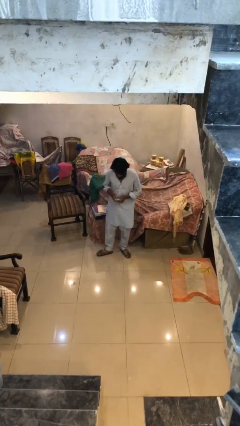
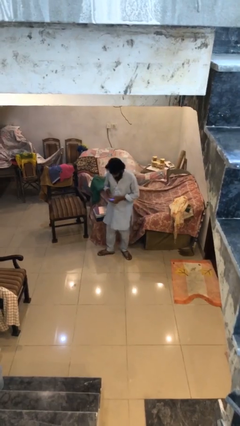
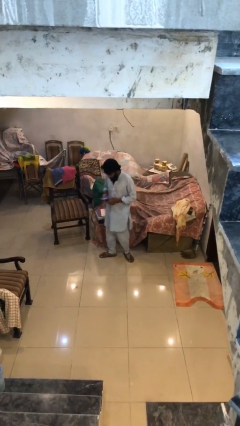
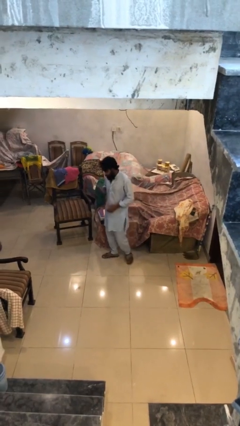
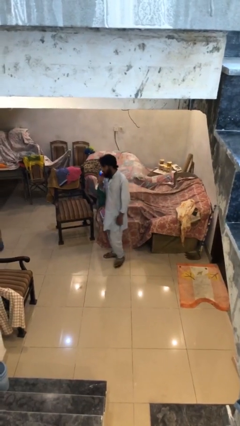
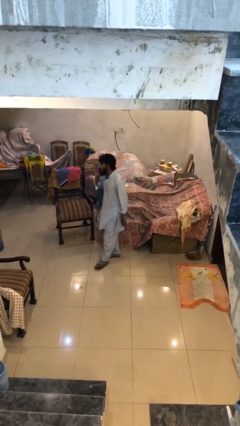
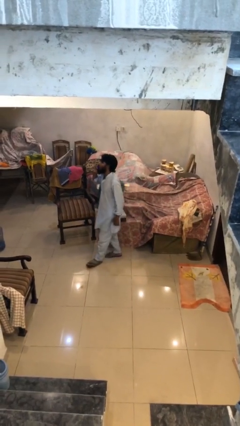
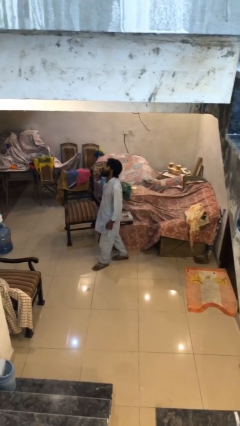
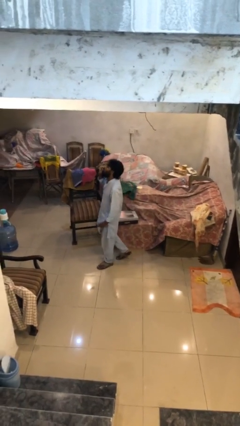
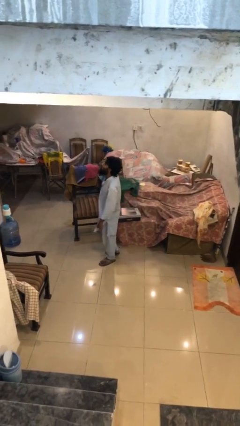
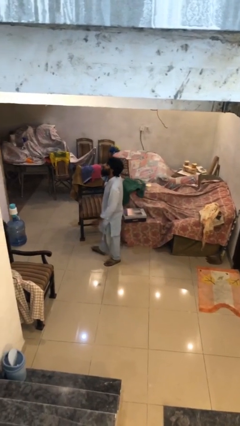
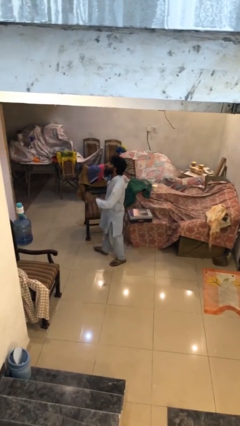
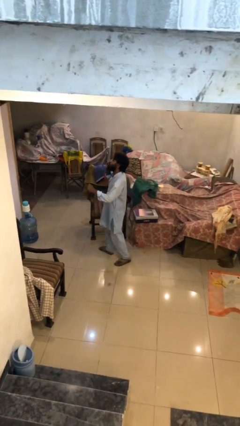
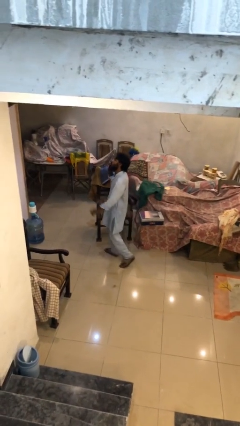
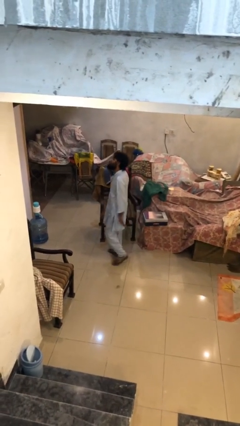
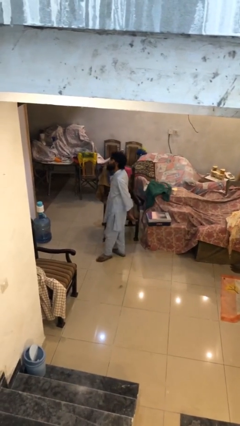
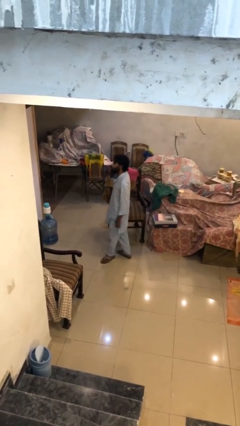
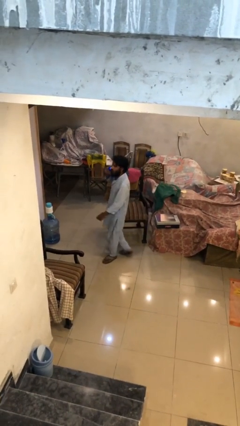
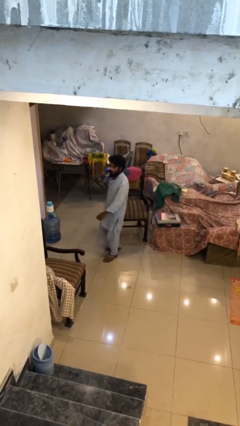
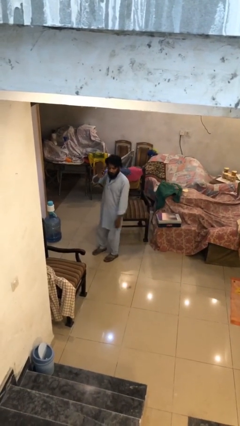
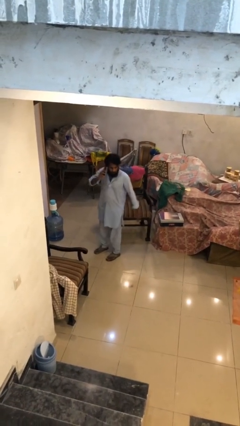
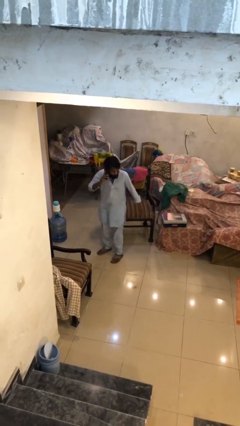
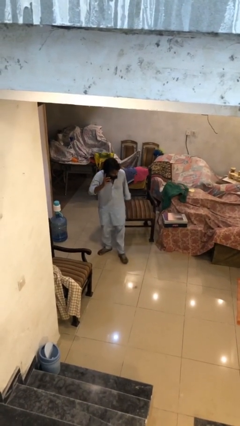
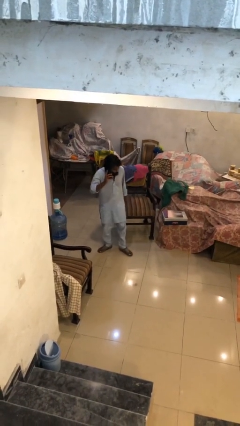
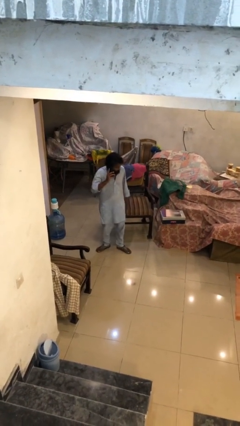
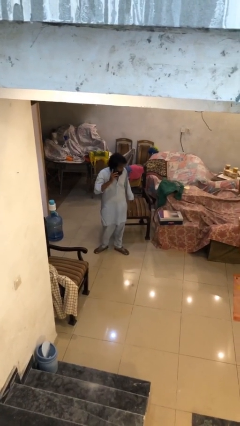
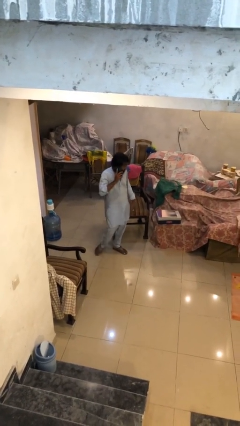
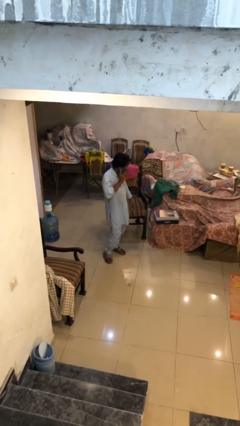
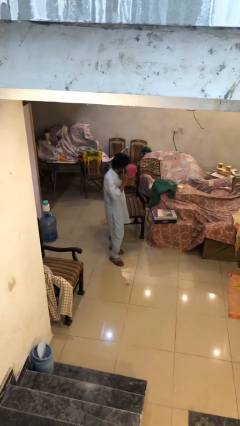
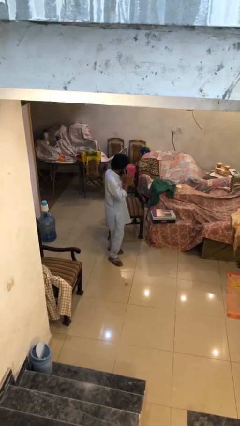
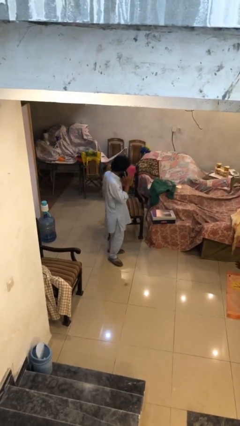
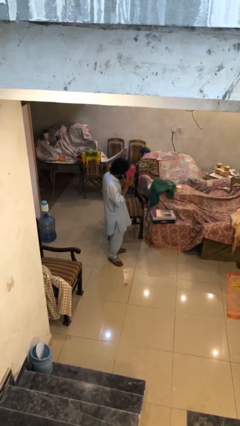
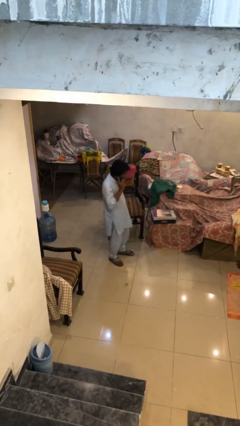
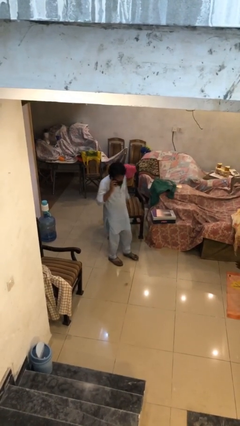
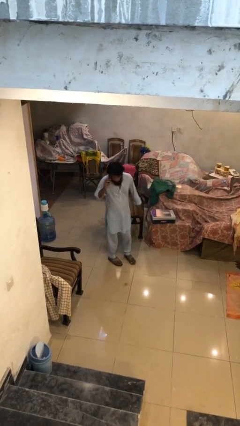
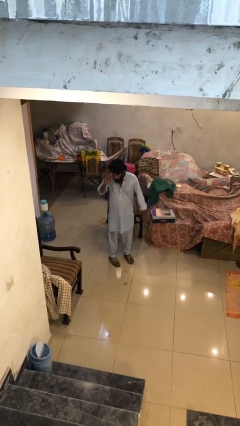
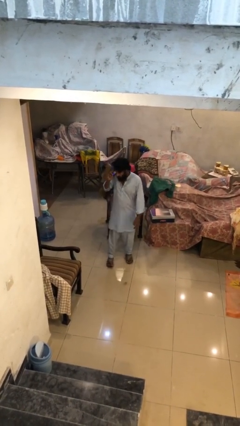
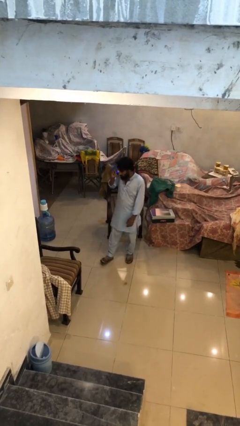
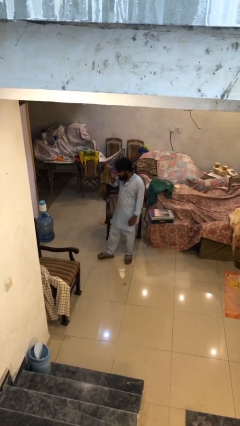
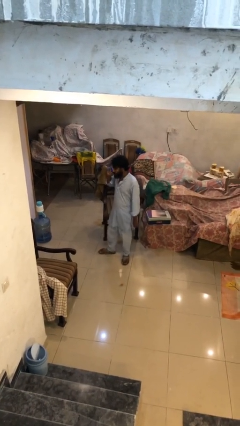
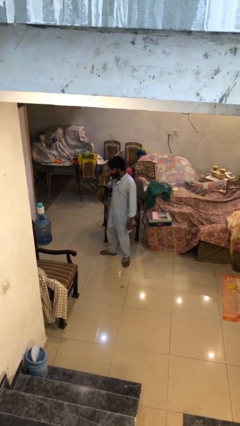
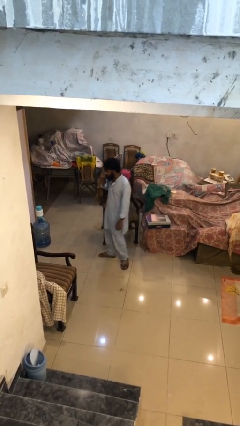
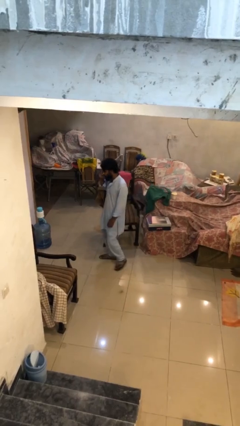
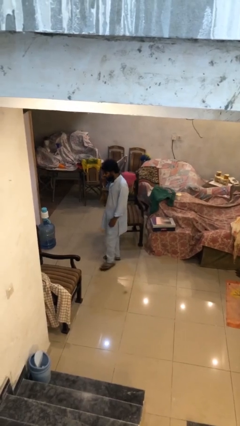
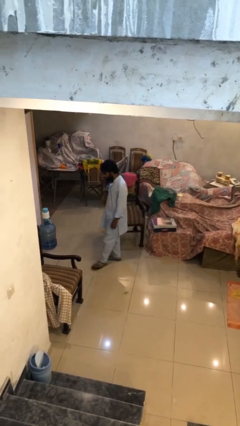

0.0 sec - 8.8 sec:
person talks on phone

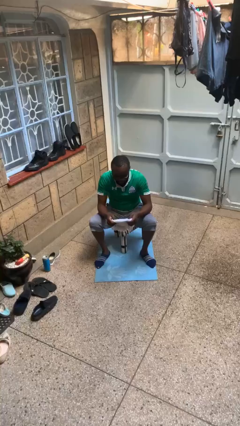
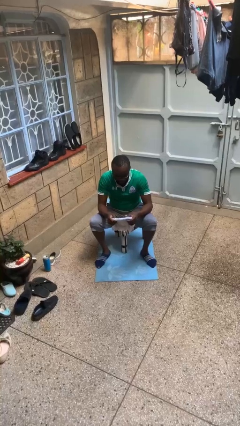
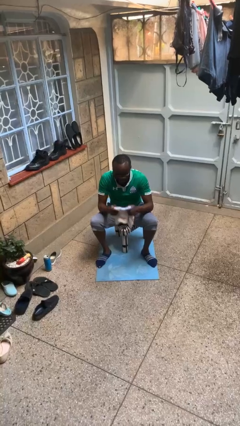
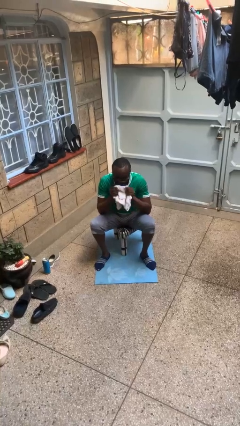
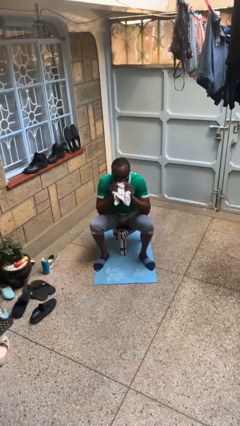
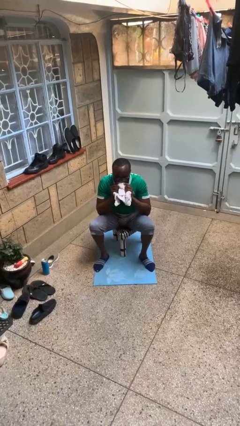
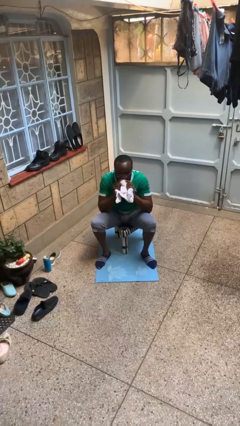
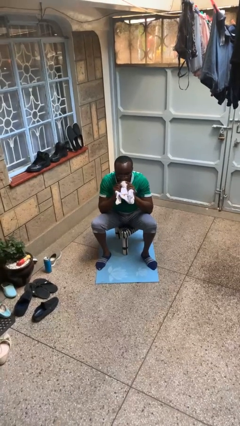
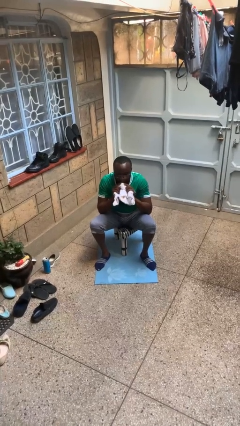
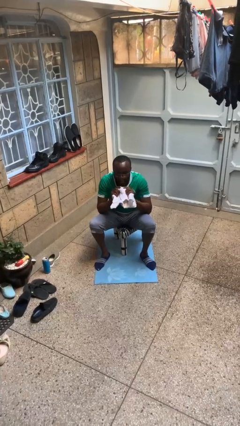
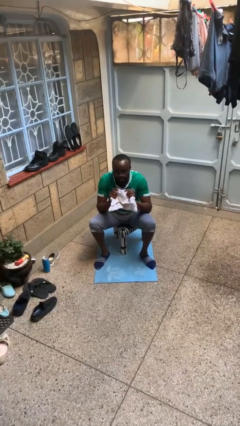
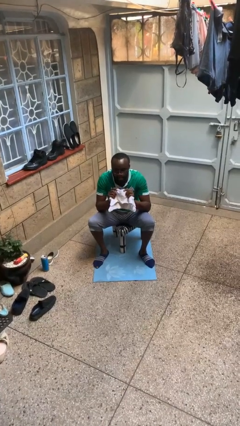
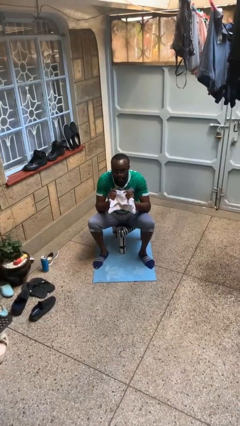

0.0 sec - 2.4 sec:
person wipes mouth with napkin

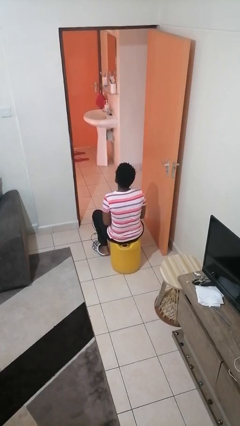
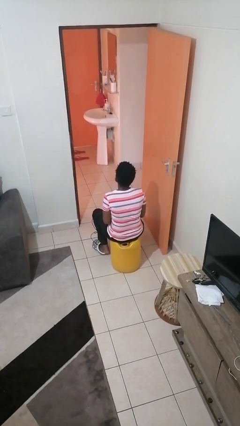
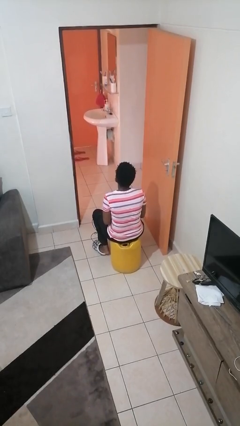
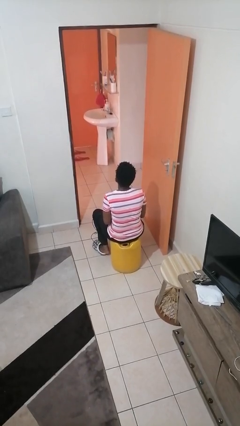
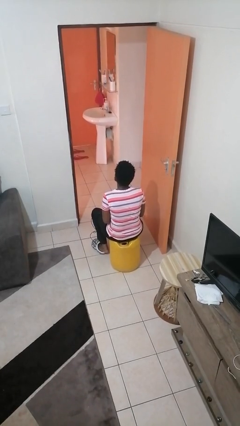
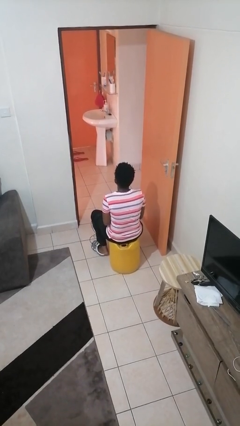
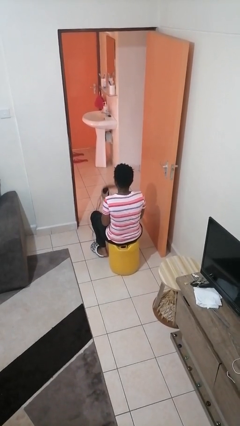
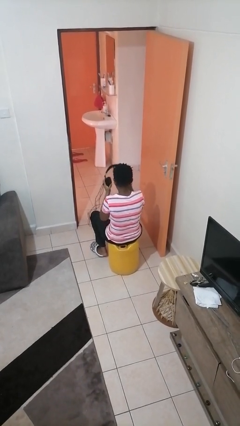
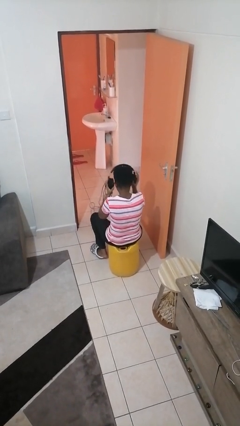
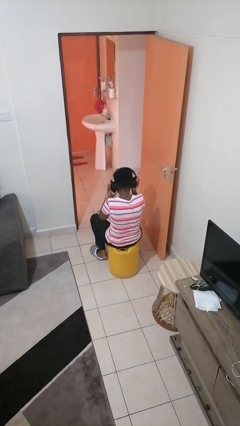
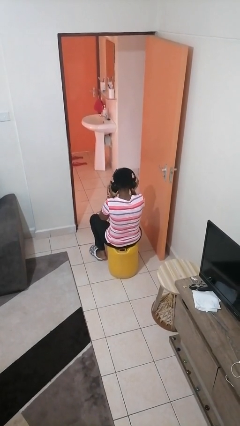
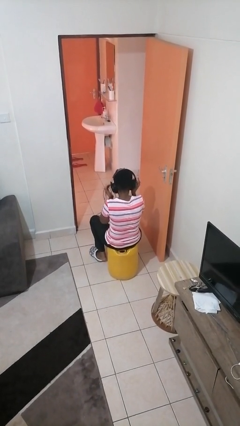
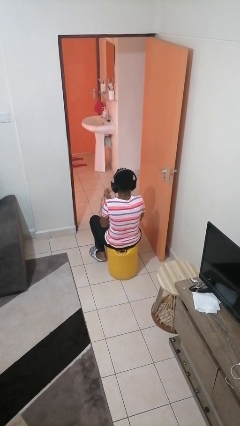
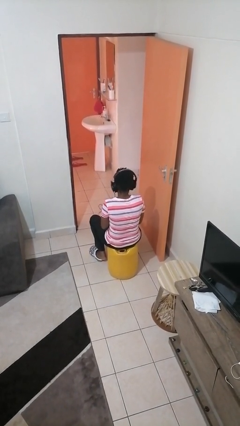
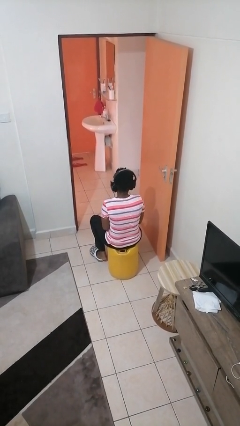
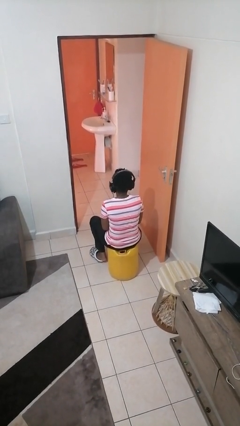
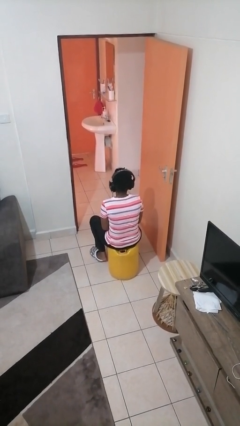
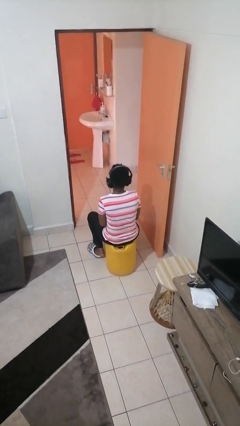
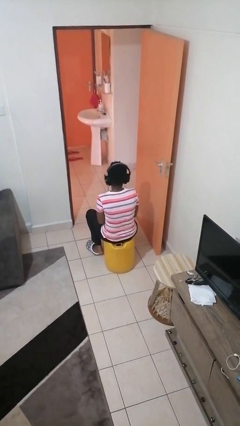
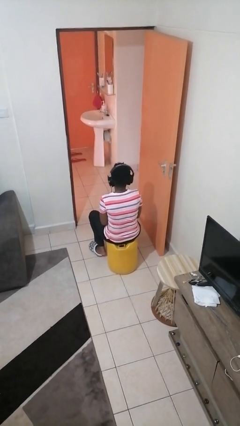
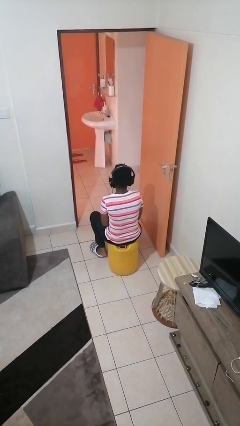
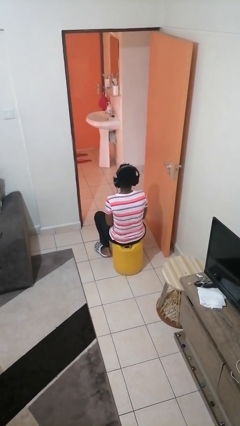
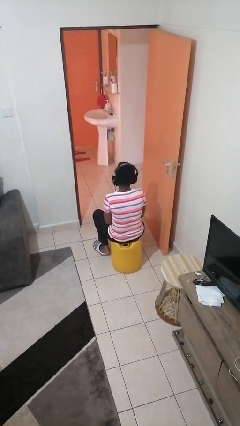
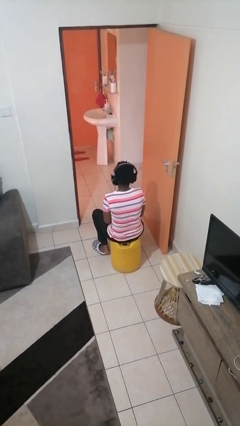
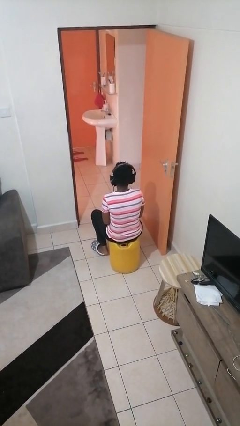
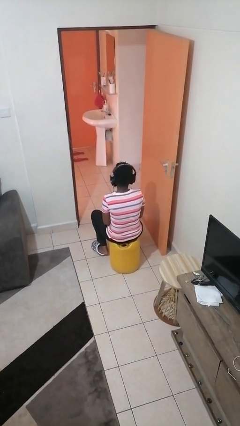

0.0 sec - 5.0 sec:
person puts on headphones

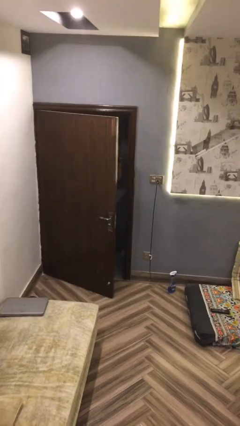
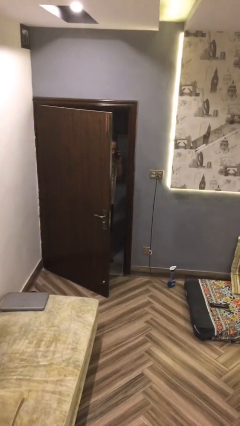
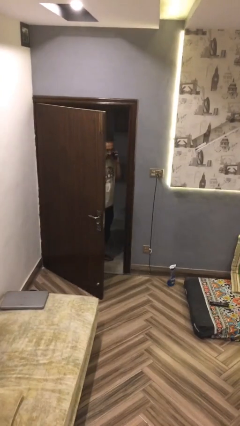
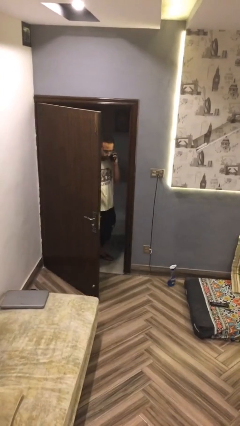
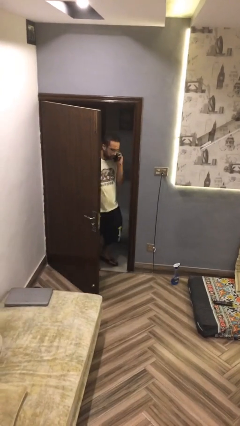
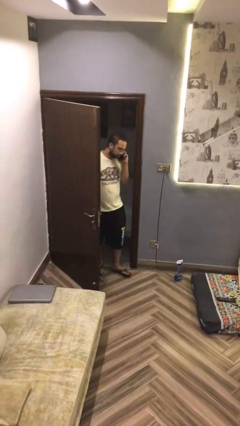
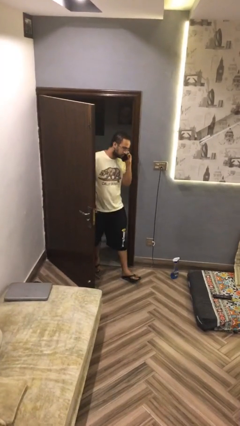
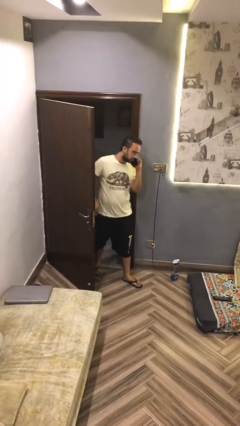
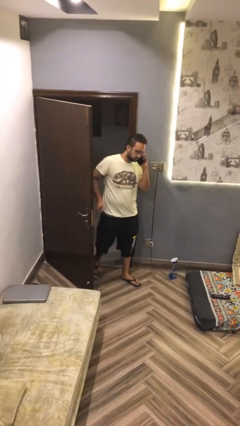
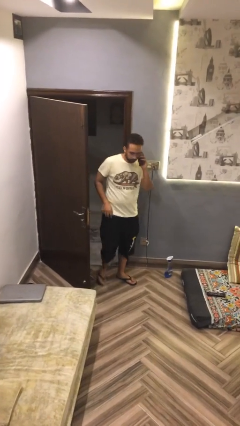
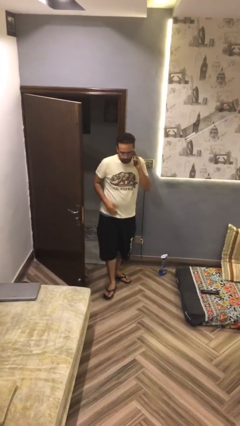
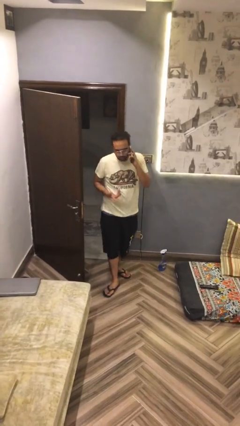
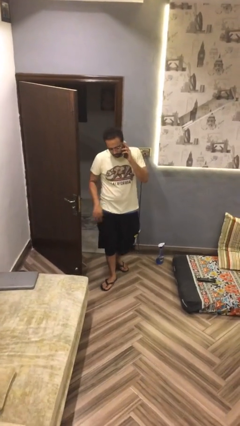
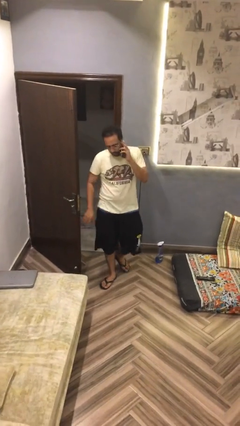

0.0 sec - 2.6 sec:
person enters scene through structure
